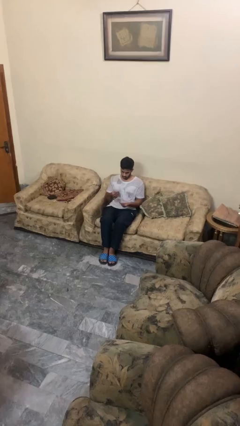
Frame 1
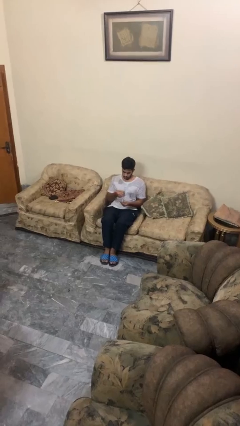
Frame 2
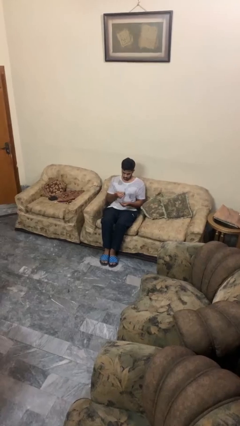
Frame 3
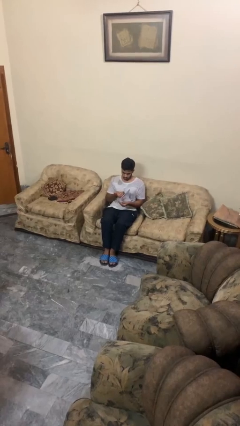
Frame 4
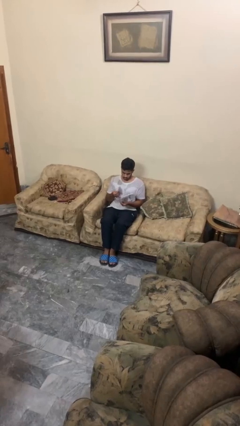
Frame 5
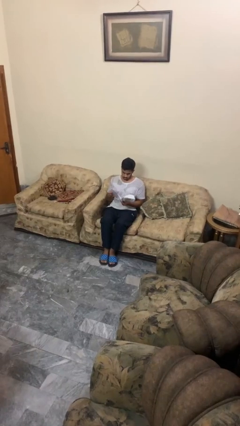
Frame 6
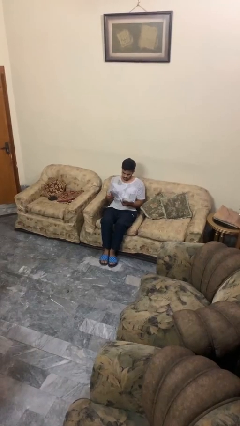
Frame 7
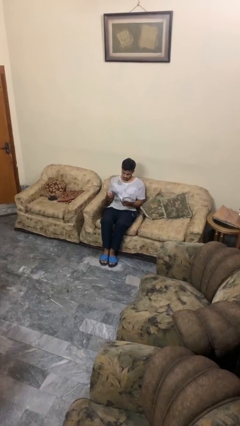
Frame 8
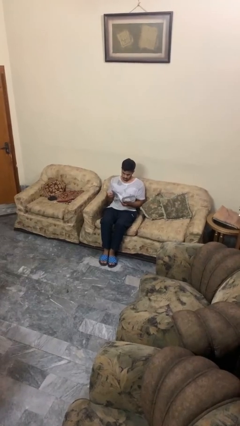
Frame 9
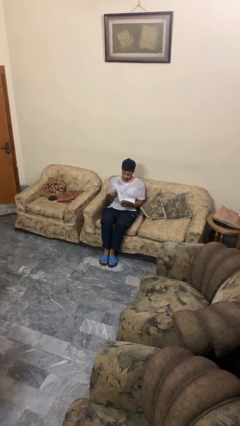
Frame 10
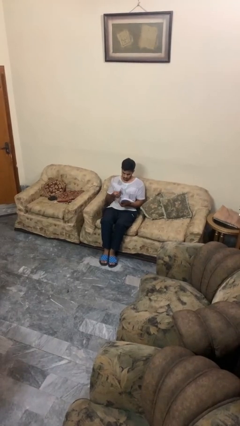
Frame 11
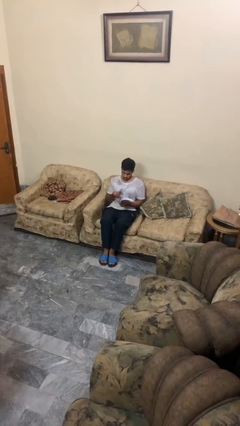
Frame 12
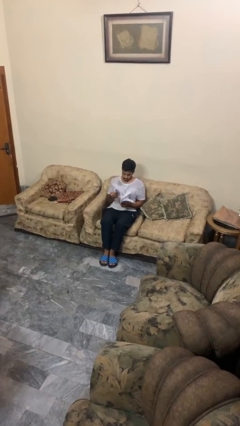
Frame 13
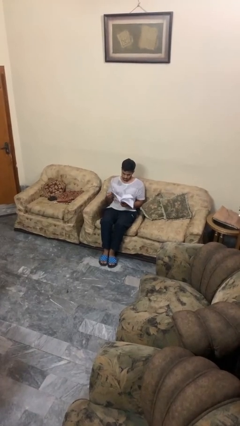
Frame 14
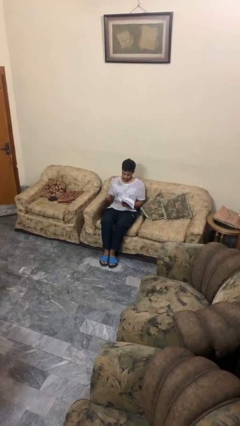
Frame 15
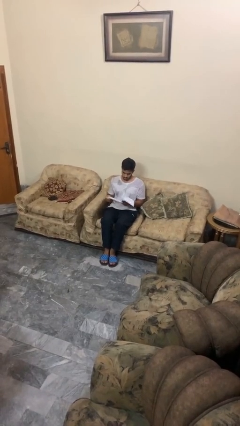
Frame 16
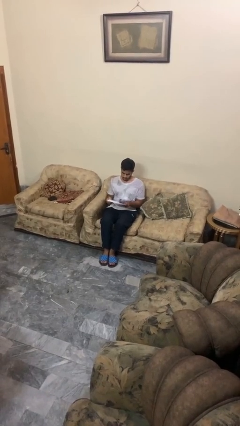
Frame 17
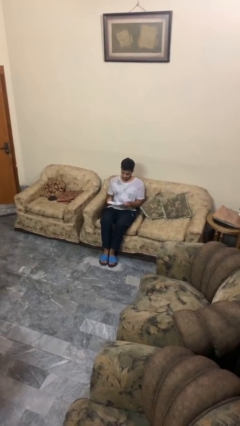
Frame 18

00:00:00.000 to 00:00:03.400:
person reads magazine

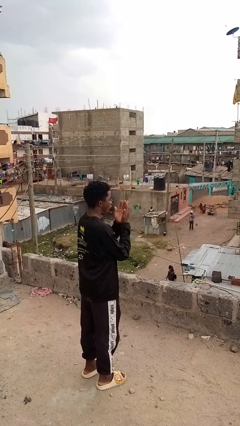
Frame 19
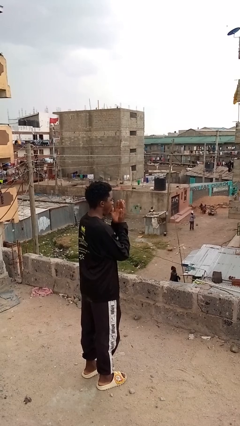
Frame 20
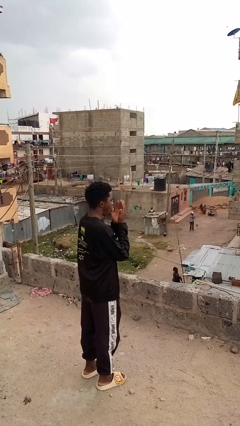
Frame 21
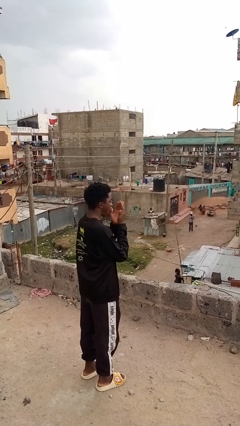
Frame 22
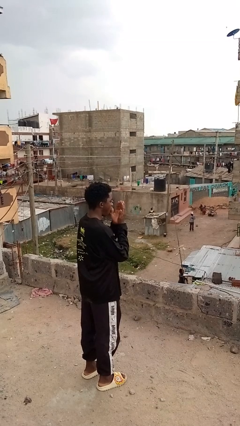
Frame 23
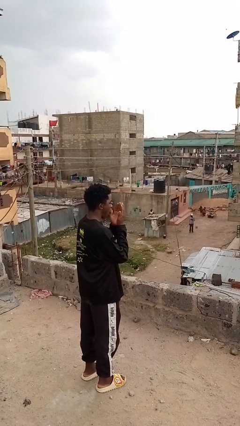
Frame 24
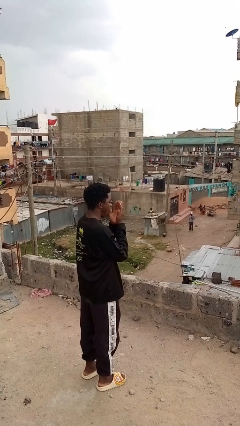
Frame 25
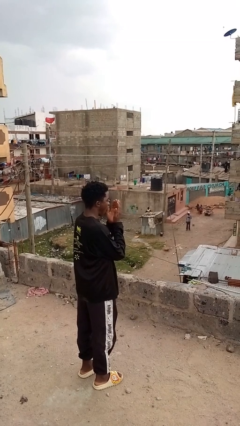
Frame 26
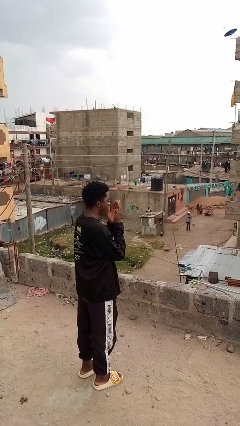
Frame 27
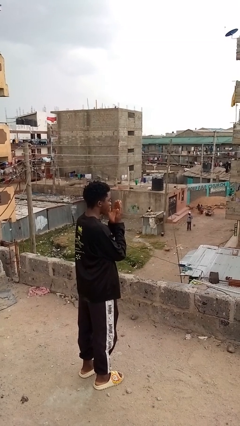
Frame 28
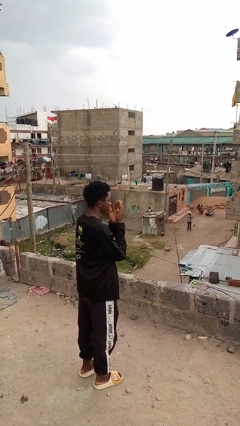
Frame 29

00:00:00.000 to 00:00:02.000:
person blows into hands

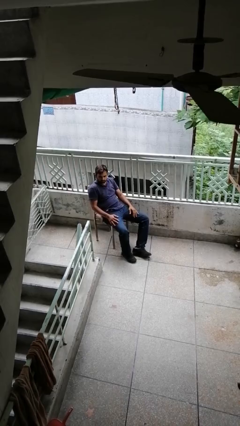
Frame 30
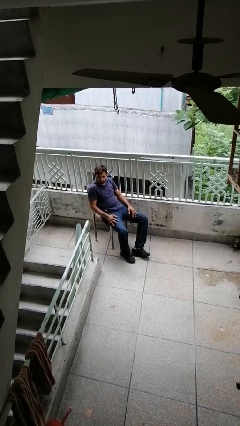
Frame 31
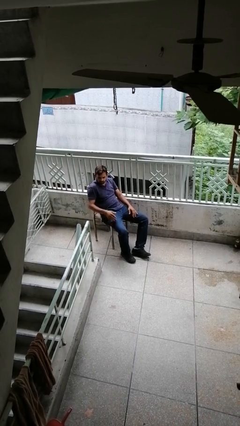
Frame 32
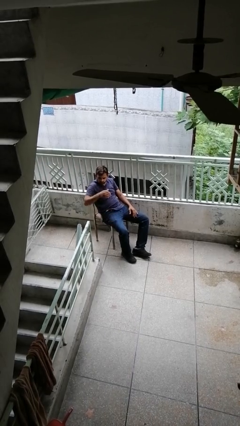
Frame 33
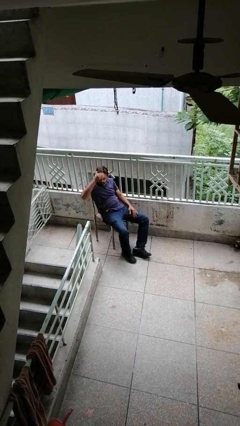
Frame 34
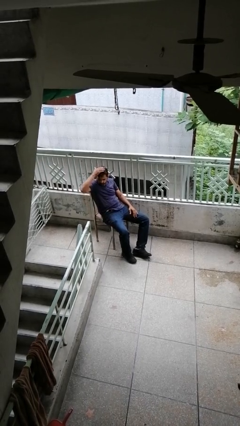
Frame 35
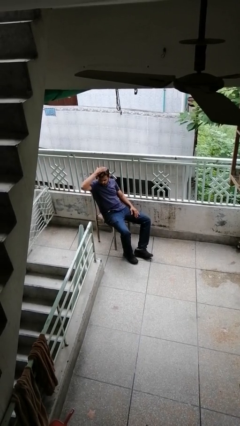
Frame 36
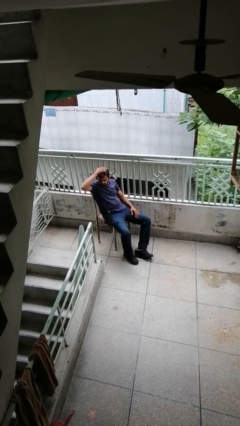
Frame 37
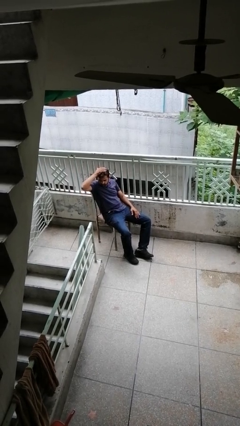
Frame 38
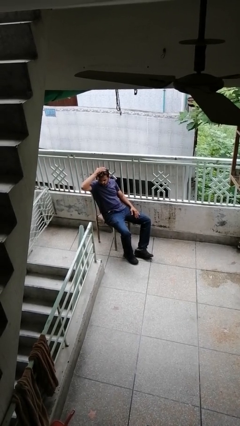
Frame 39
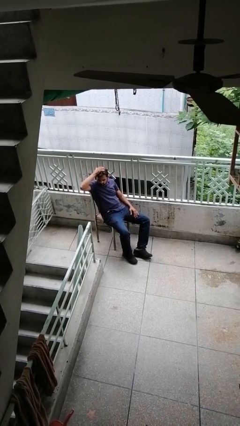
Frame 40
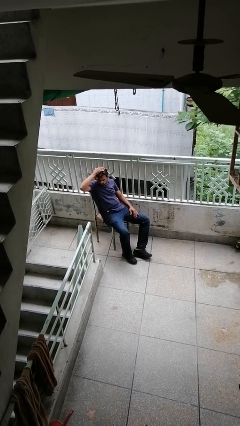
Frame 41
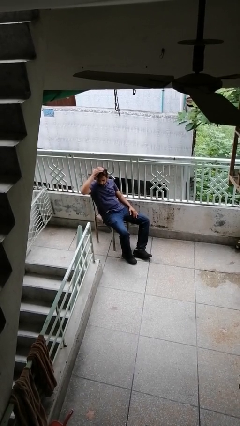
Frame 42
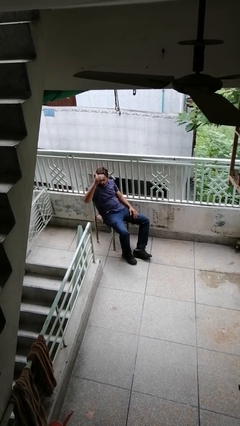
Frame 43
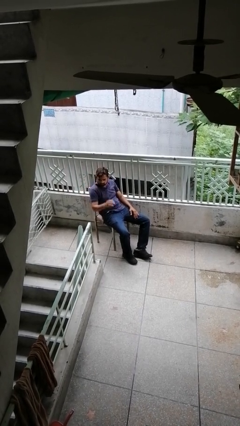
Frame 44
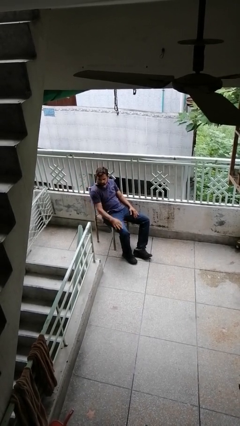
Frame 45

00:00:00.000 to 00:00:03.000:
person pats head

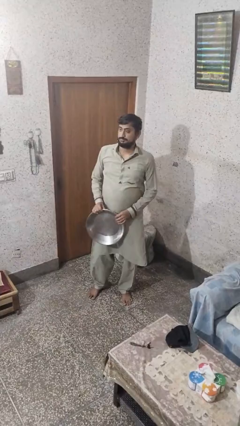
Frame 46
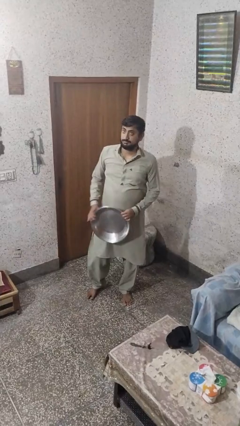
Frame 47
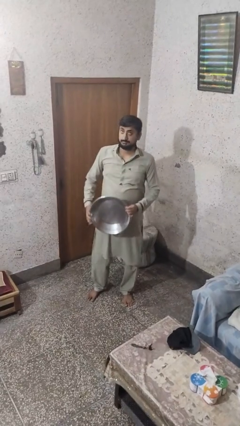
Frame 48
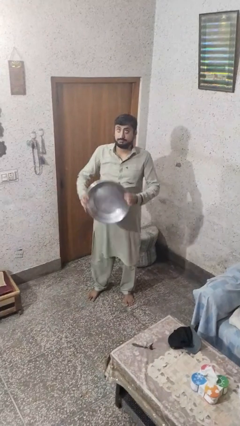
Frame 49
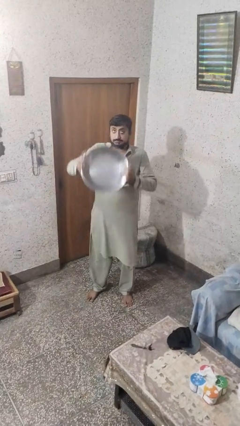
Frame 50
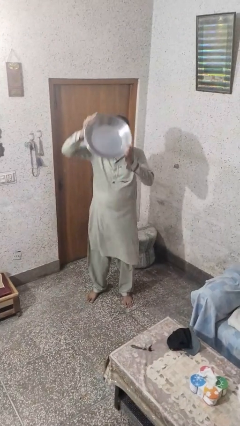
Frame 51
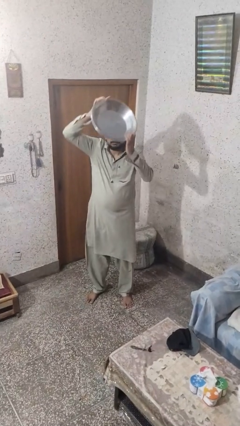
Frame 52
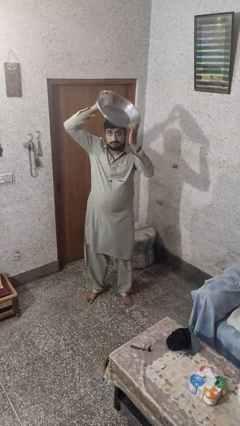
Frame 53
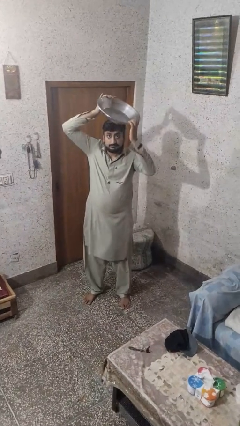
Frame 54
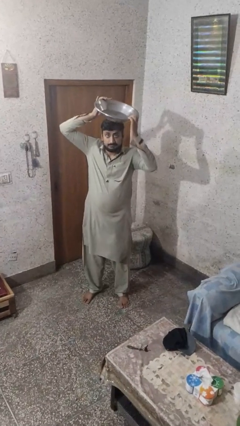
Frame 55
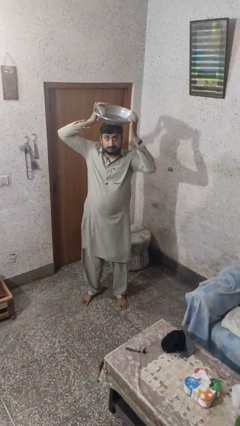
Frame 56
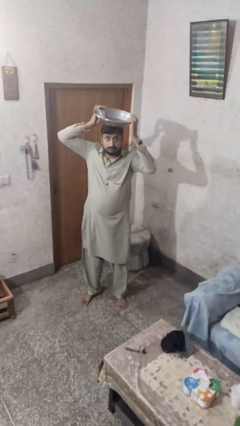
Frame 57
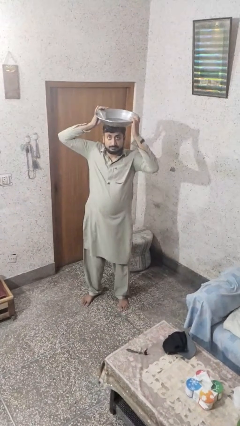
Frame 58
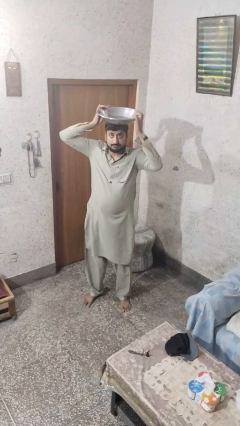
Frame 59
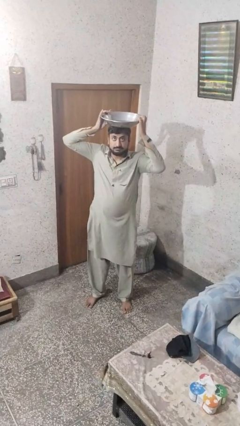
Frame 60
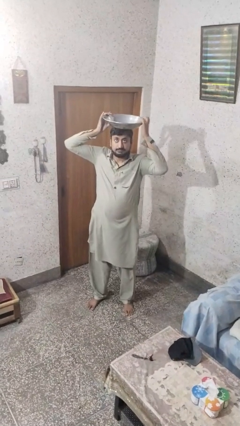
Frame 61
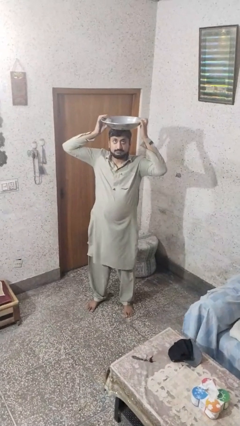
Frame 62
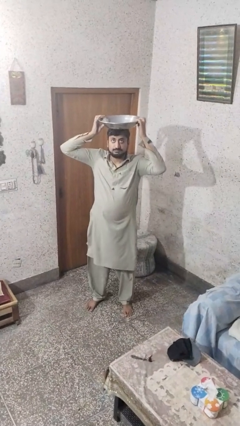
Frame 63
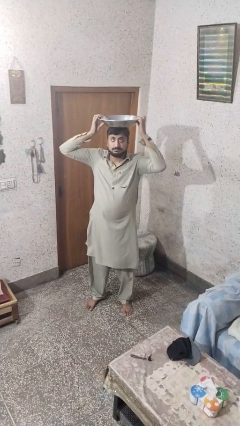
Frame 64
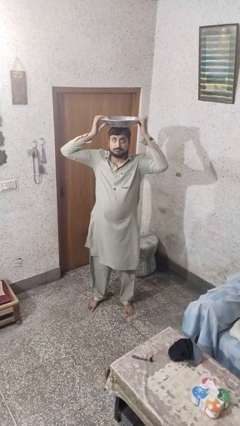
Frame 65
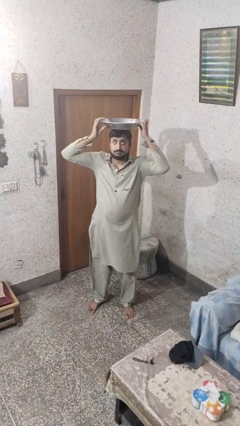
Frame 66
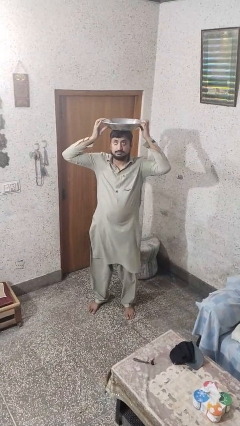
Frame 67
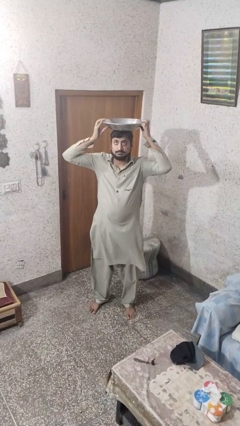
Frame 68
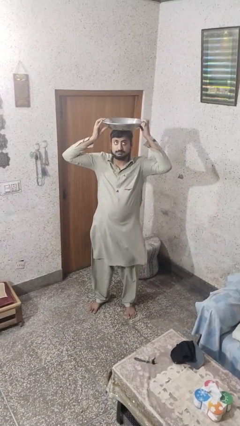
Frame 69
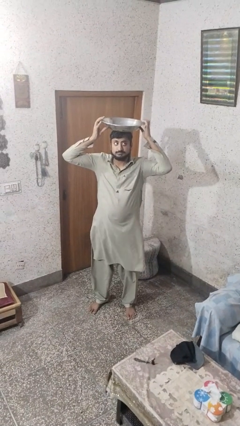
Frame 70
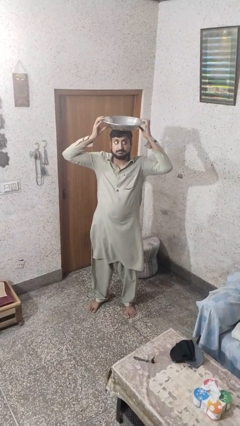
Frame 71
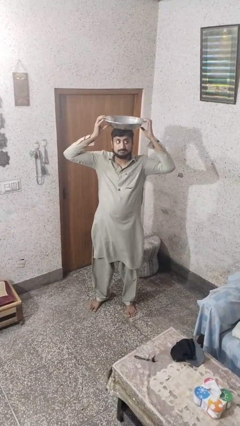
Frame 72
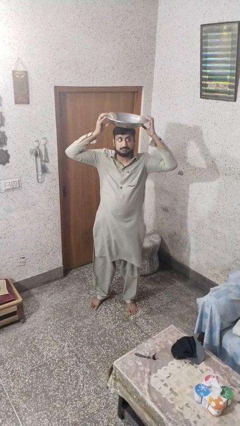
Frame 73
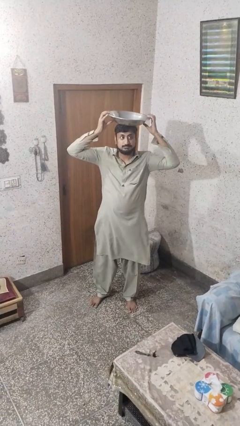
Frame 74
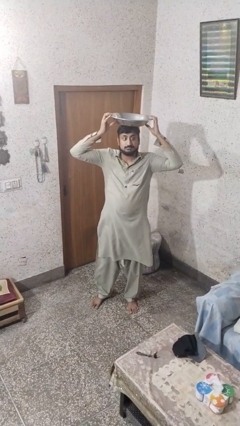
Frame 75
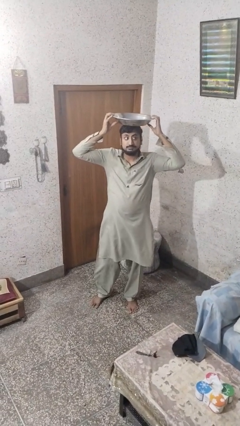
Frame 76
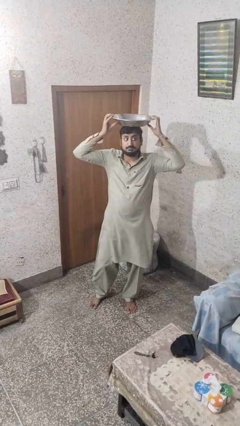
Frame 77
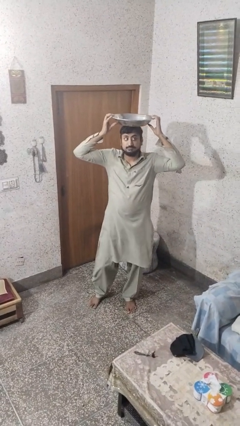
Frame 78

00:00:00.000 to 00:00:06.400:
person holds object above head

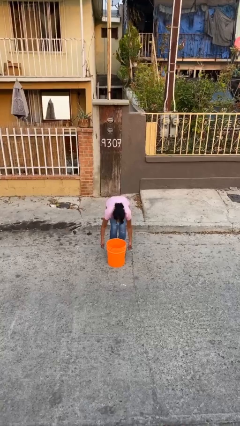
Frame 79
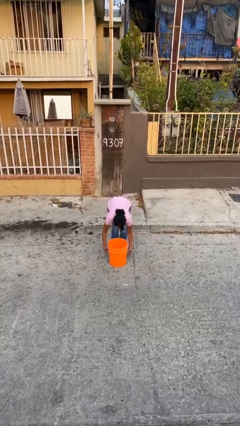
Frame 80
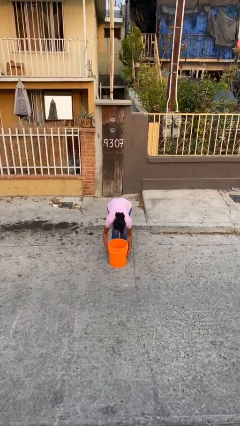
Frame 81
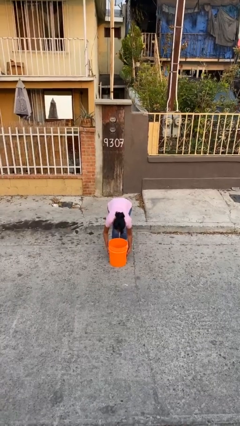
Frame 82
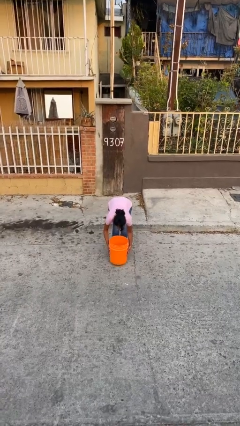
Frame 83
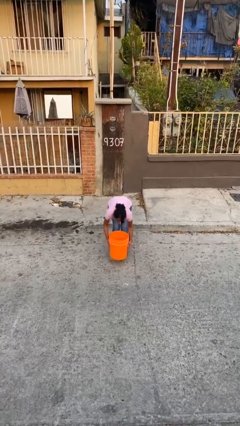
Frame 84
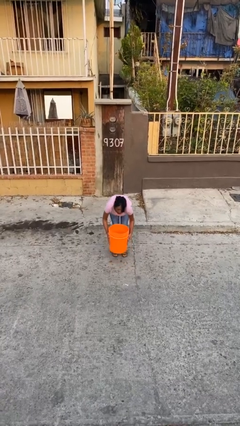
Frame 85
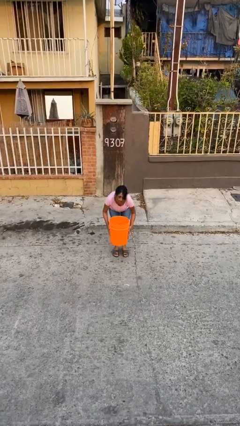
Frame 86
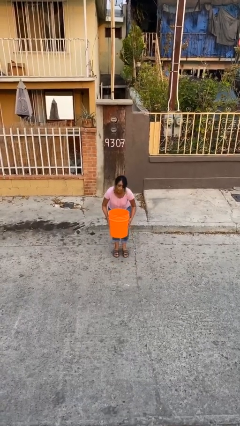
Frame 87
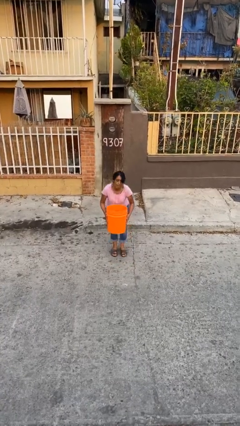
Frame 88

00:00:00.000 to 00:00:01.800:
person picks up object from floor

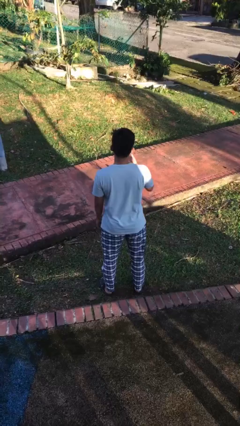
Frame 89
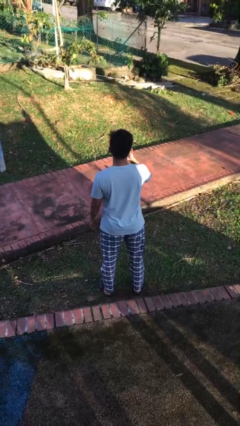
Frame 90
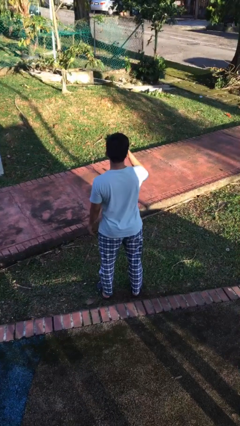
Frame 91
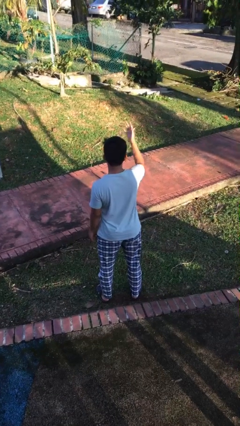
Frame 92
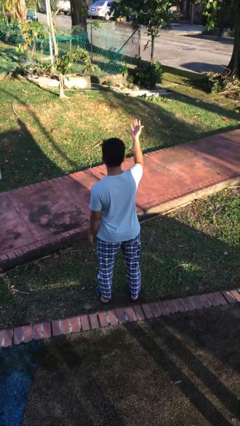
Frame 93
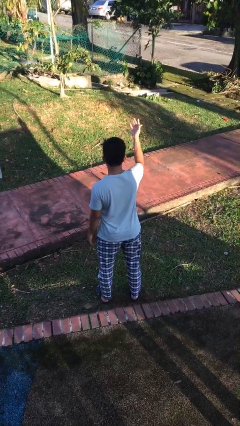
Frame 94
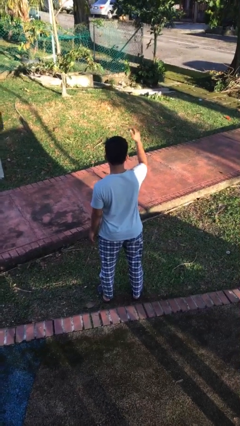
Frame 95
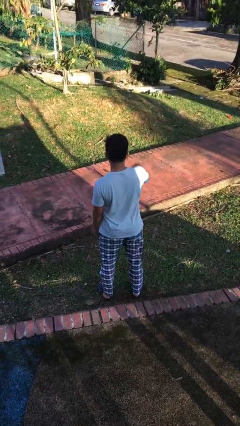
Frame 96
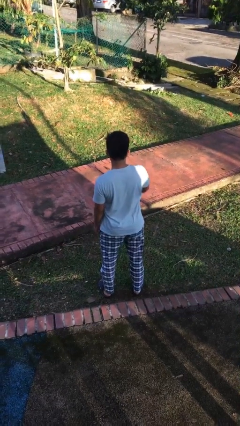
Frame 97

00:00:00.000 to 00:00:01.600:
person gestures blow kiss
